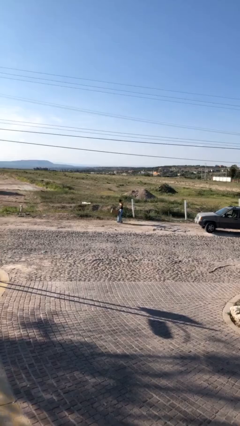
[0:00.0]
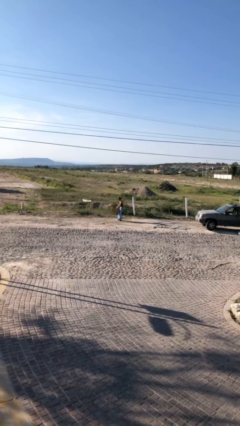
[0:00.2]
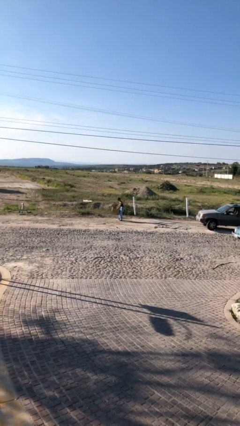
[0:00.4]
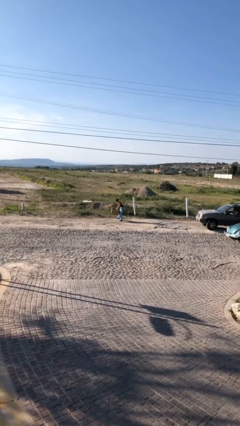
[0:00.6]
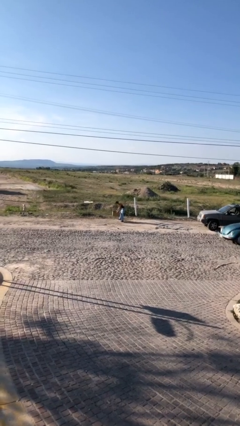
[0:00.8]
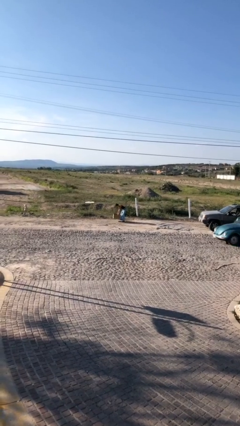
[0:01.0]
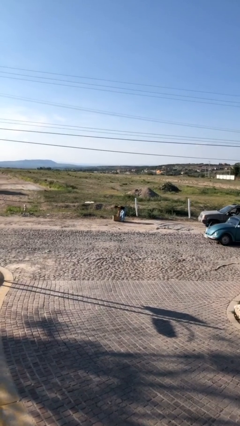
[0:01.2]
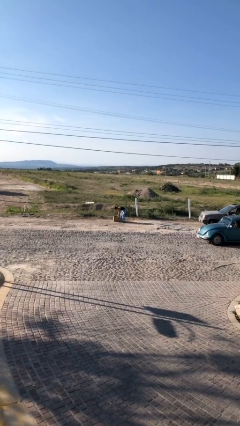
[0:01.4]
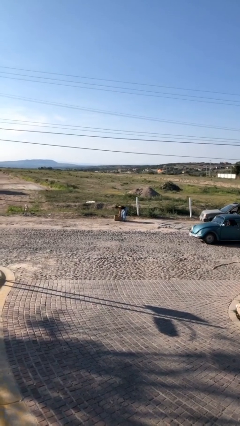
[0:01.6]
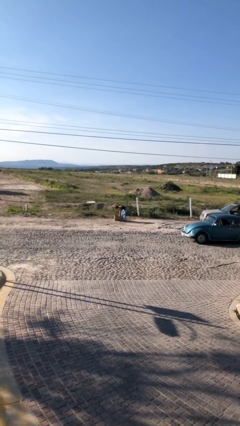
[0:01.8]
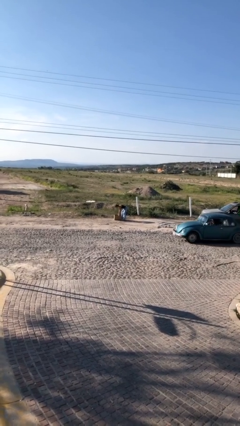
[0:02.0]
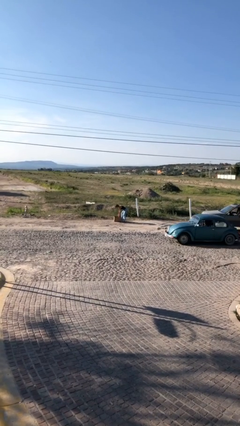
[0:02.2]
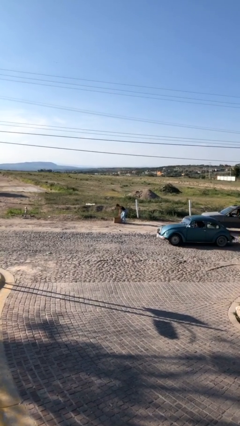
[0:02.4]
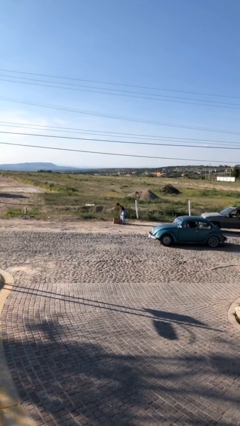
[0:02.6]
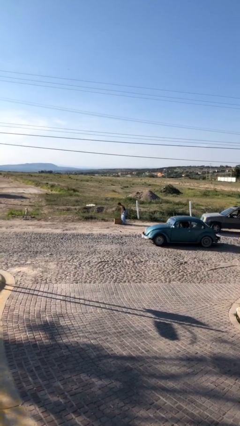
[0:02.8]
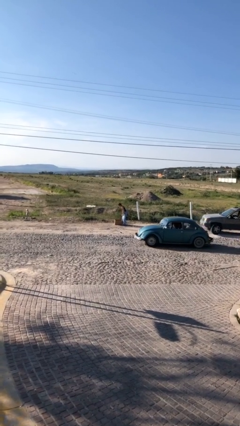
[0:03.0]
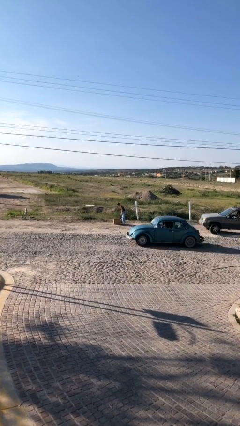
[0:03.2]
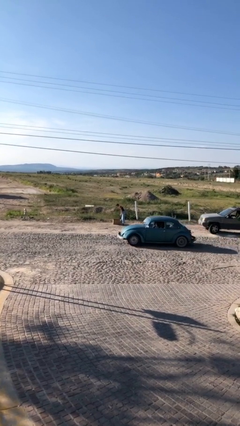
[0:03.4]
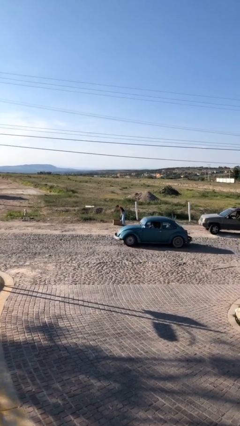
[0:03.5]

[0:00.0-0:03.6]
person puts down object on floor

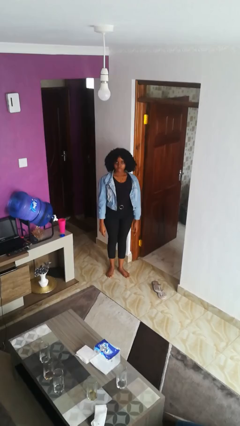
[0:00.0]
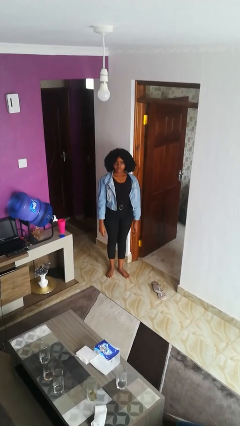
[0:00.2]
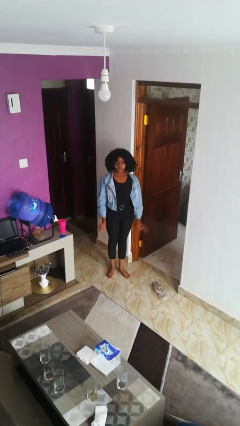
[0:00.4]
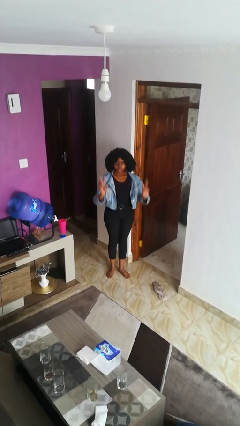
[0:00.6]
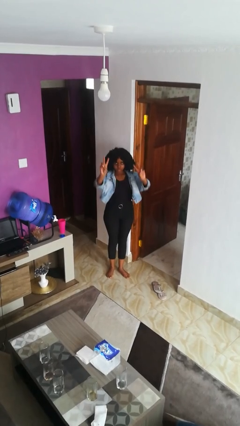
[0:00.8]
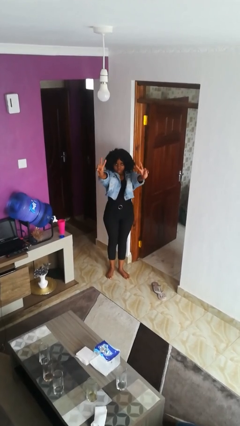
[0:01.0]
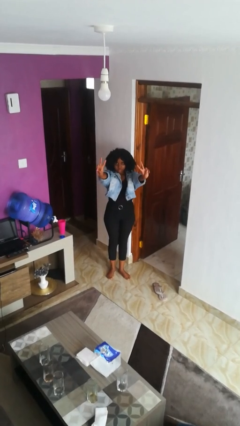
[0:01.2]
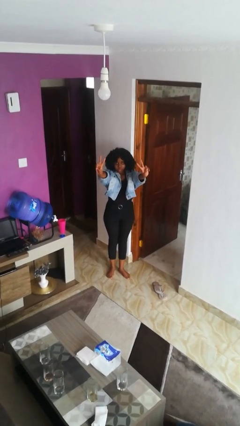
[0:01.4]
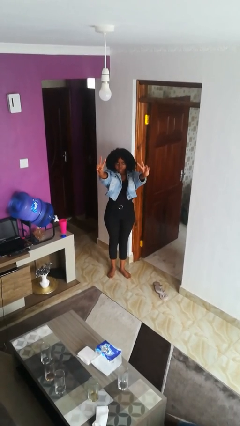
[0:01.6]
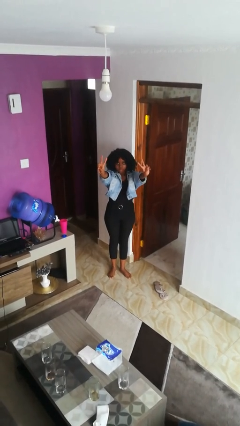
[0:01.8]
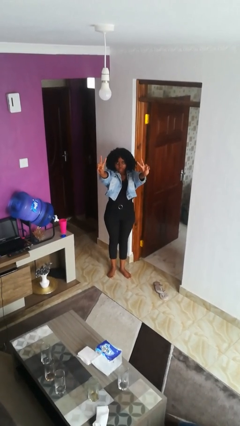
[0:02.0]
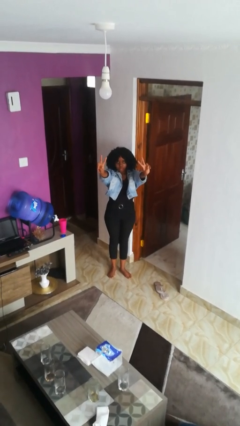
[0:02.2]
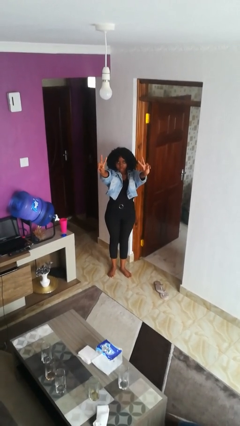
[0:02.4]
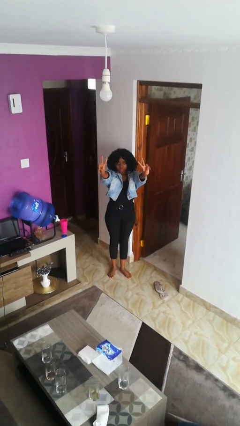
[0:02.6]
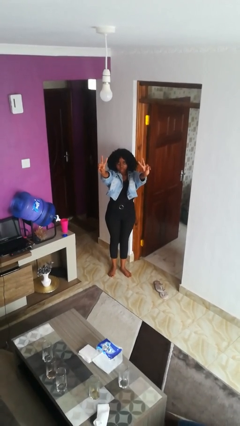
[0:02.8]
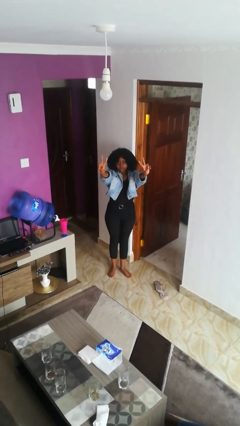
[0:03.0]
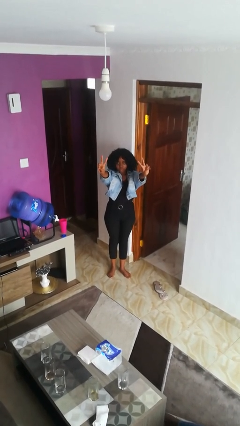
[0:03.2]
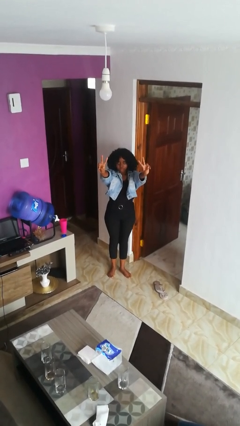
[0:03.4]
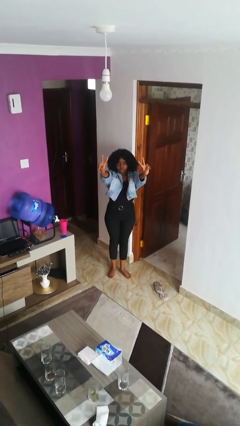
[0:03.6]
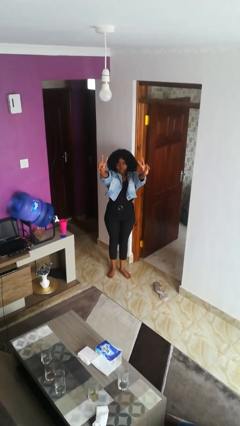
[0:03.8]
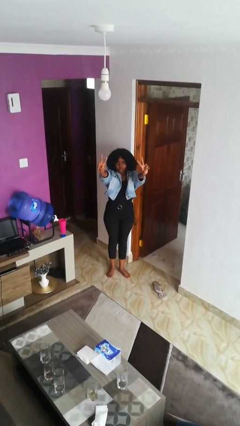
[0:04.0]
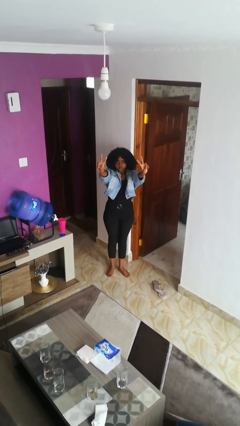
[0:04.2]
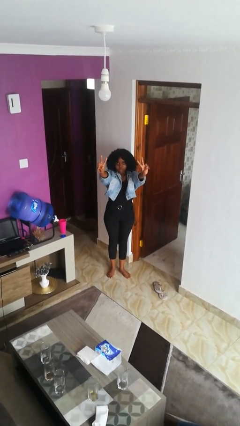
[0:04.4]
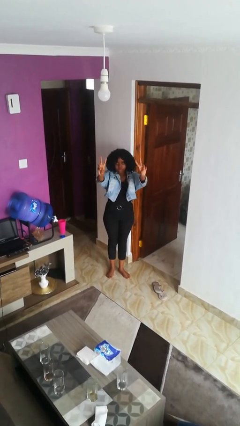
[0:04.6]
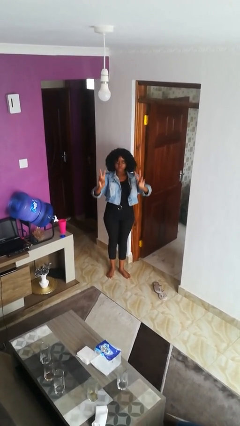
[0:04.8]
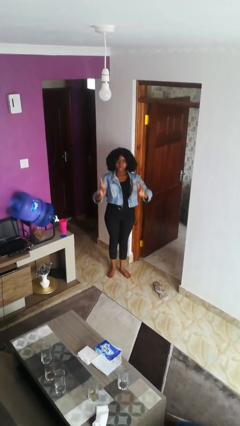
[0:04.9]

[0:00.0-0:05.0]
person gestures peace

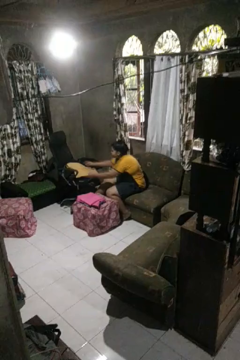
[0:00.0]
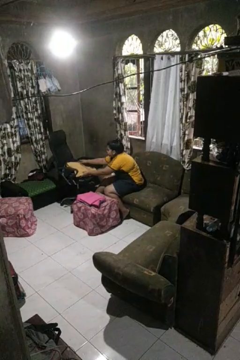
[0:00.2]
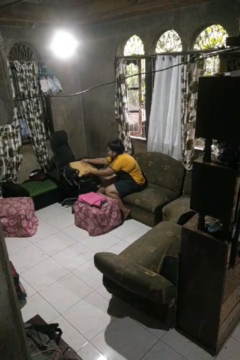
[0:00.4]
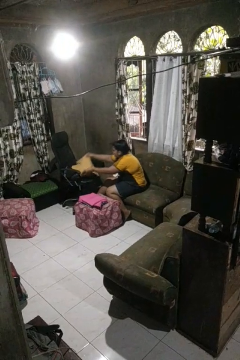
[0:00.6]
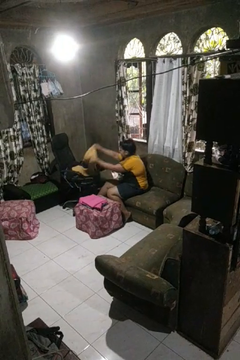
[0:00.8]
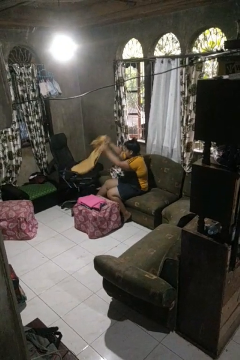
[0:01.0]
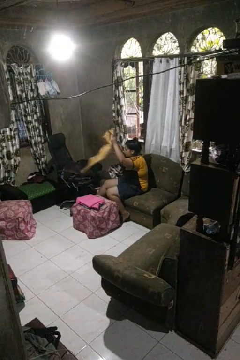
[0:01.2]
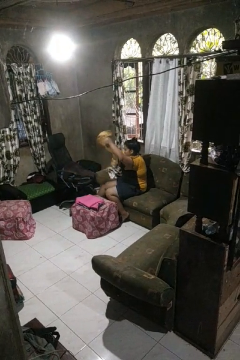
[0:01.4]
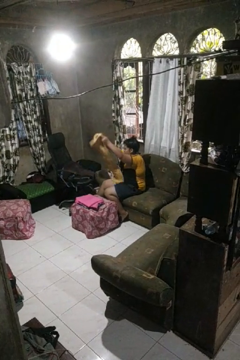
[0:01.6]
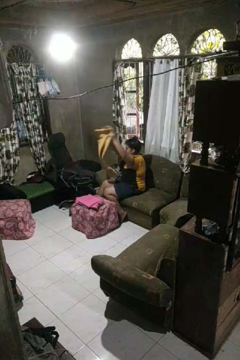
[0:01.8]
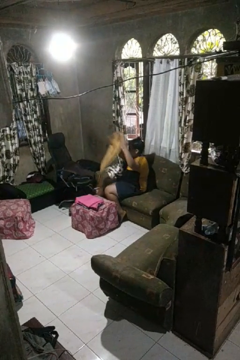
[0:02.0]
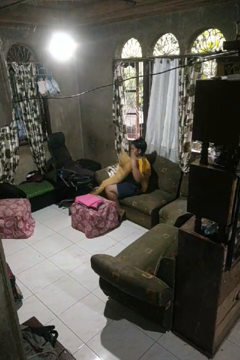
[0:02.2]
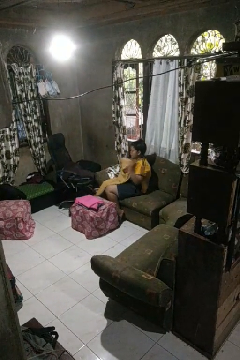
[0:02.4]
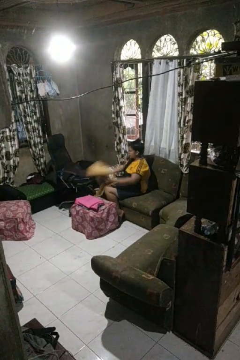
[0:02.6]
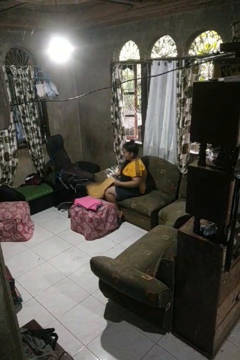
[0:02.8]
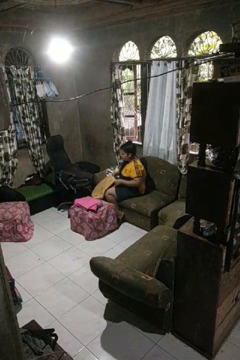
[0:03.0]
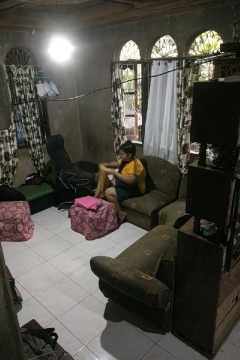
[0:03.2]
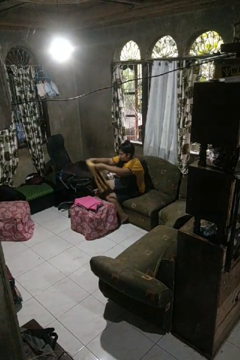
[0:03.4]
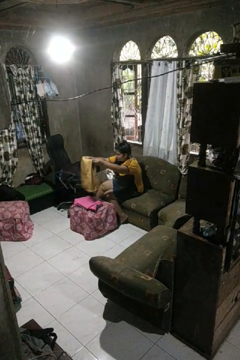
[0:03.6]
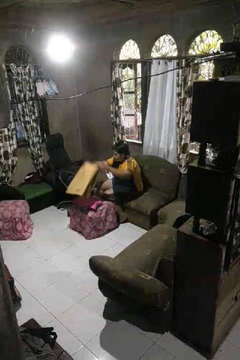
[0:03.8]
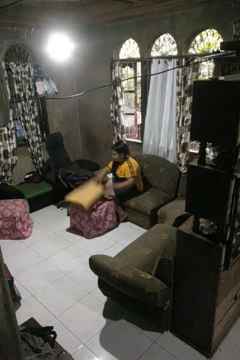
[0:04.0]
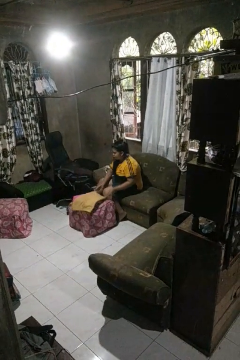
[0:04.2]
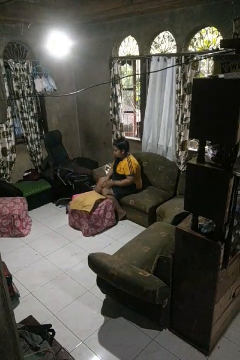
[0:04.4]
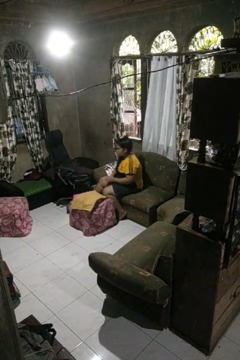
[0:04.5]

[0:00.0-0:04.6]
person folds pants

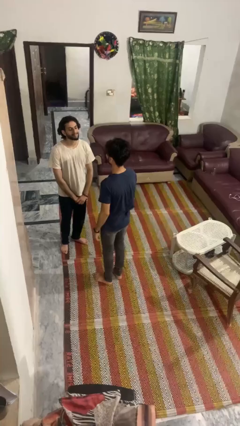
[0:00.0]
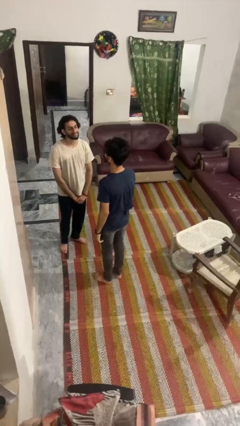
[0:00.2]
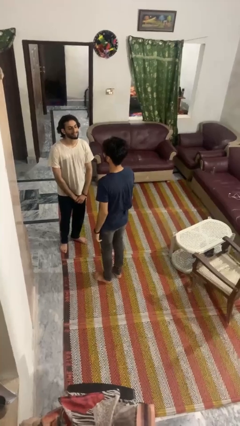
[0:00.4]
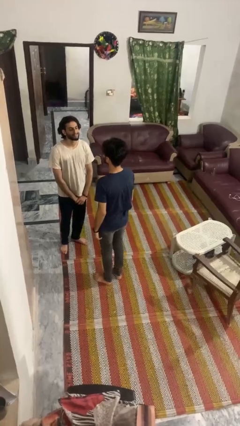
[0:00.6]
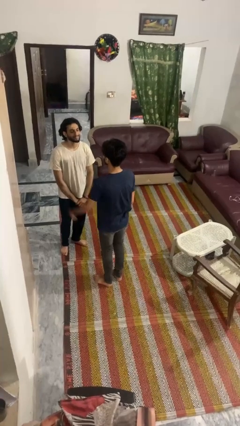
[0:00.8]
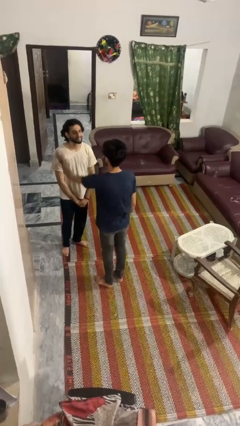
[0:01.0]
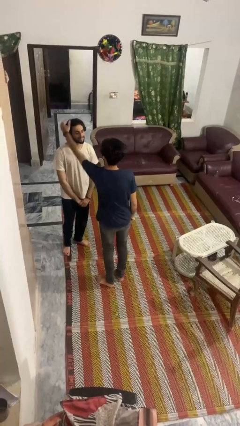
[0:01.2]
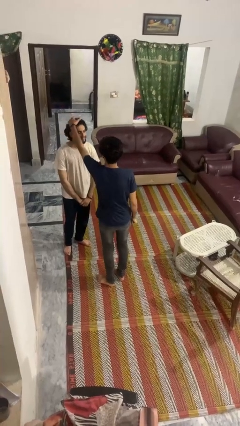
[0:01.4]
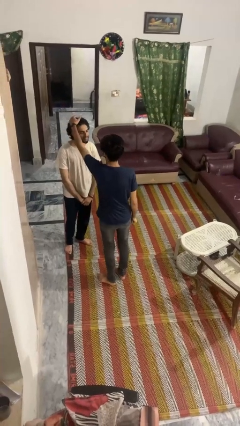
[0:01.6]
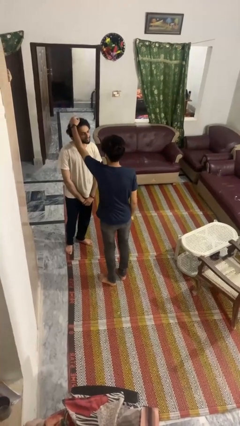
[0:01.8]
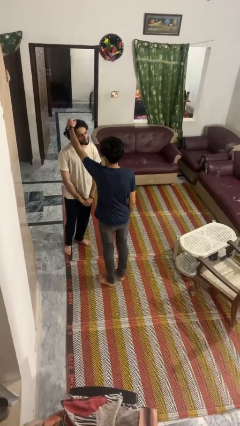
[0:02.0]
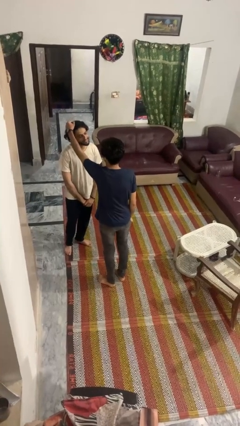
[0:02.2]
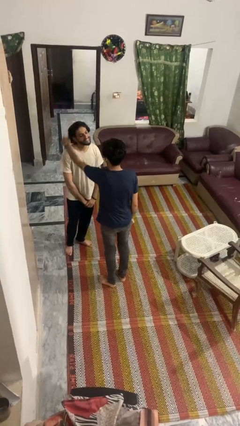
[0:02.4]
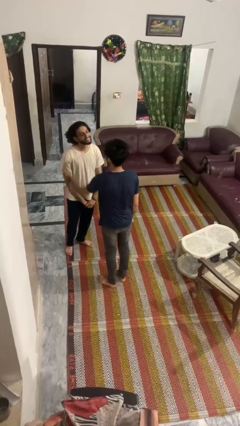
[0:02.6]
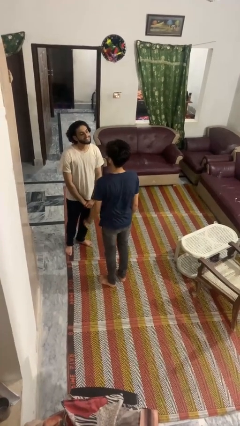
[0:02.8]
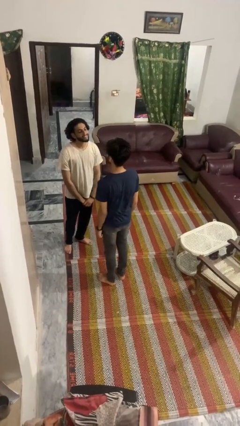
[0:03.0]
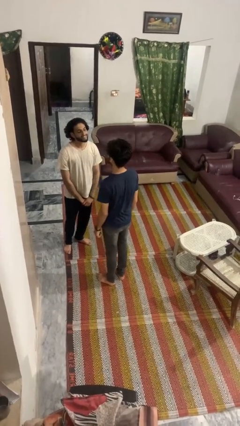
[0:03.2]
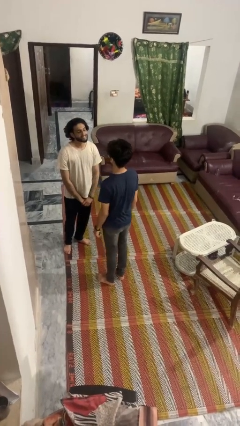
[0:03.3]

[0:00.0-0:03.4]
person grabs person by hair

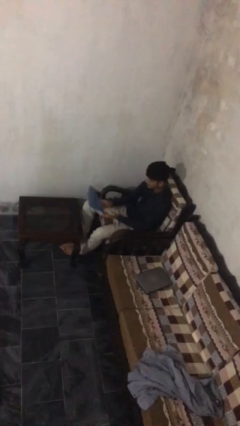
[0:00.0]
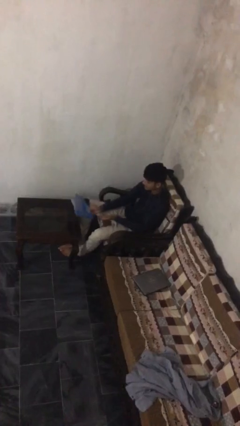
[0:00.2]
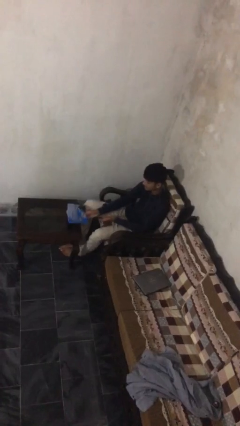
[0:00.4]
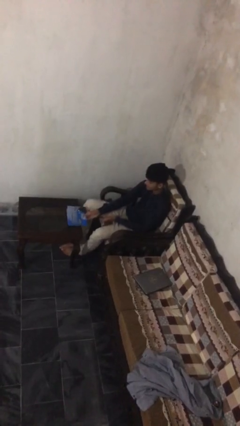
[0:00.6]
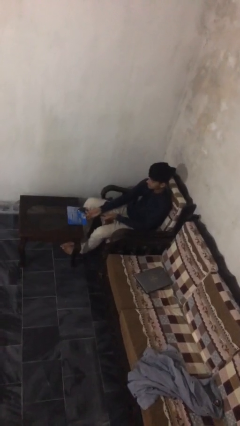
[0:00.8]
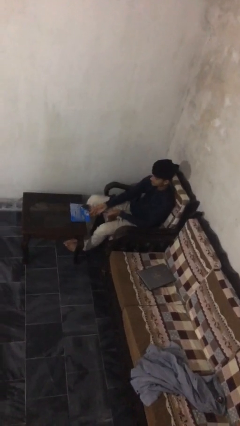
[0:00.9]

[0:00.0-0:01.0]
person puts down object on table

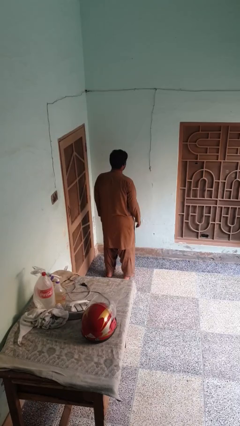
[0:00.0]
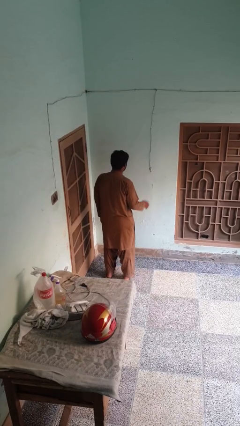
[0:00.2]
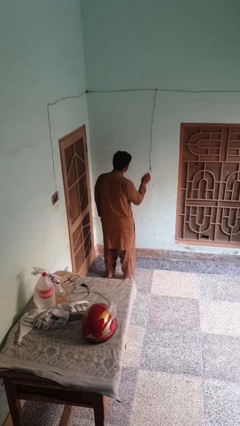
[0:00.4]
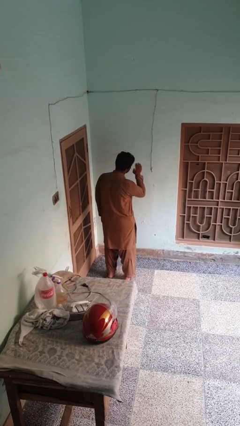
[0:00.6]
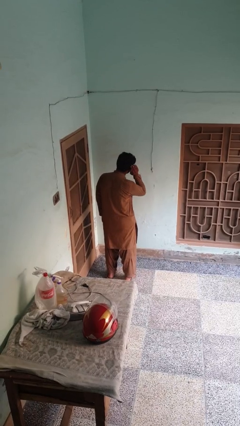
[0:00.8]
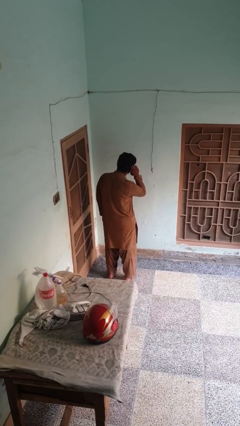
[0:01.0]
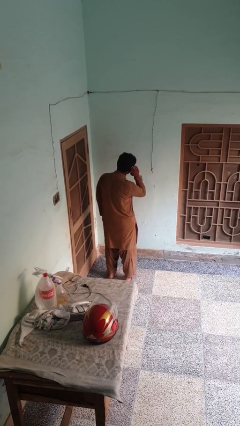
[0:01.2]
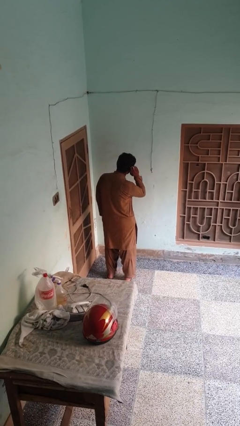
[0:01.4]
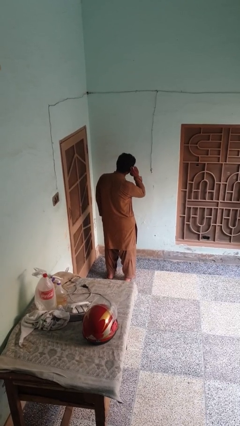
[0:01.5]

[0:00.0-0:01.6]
person gestures listen closely
